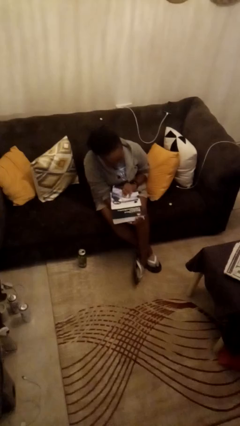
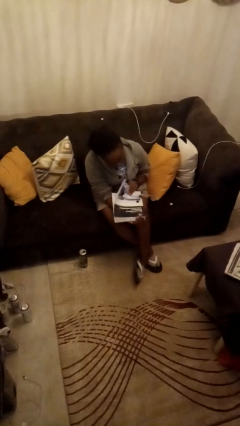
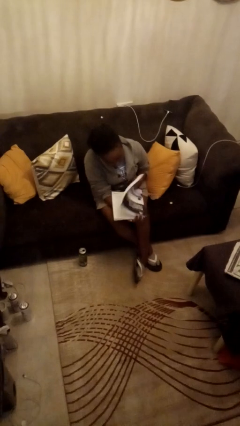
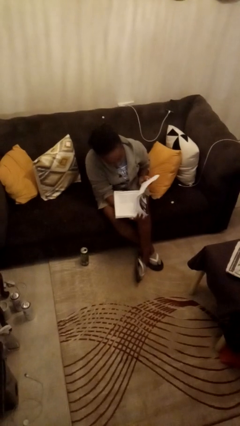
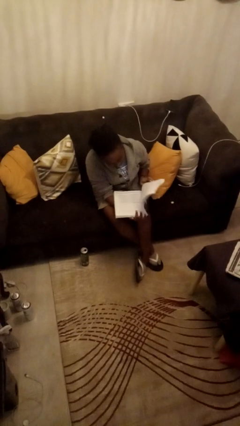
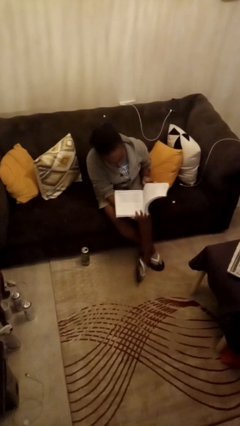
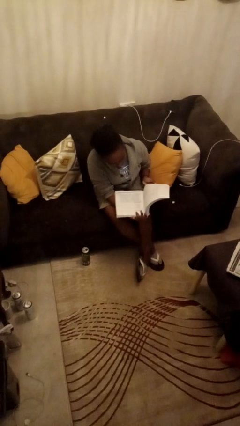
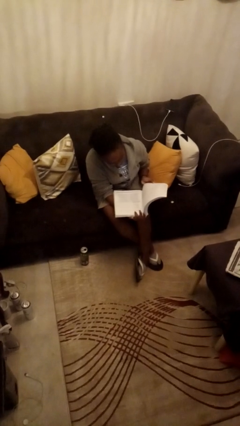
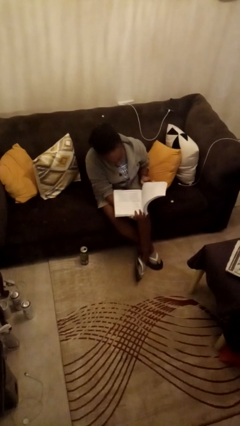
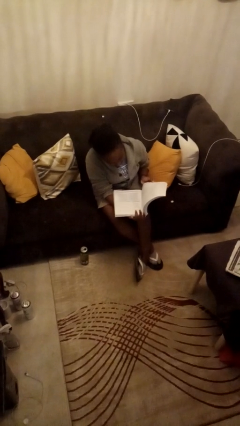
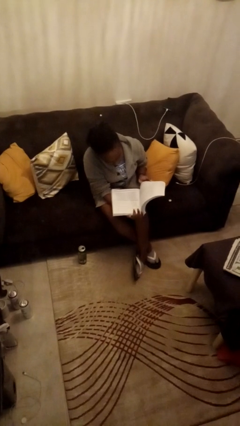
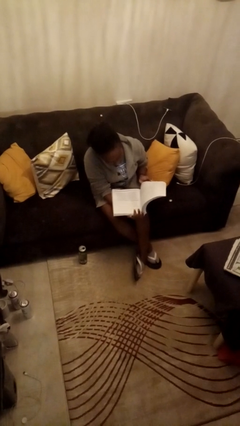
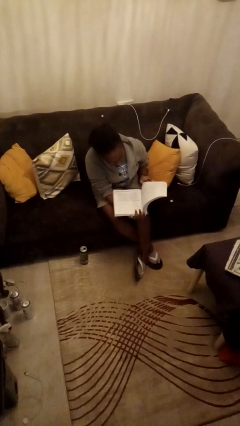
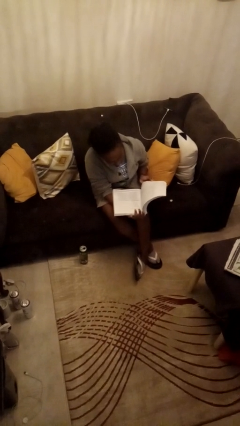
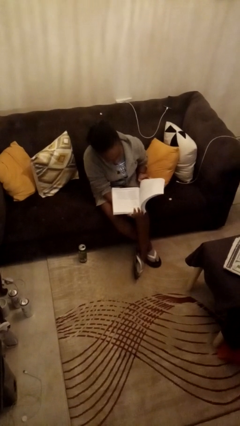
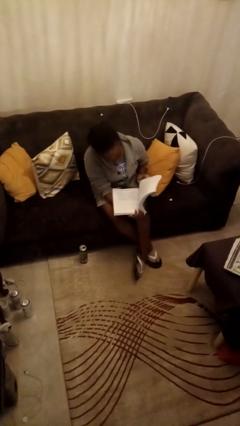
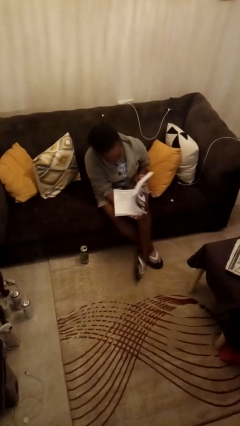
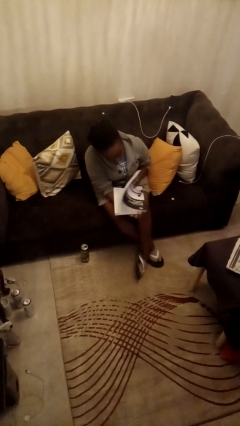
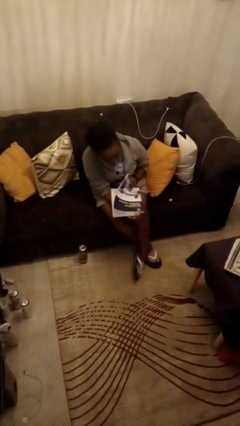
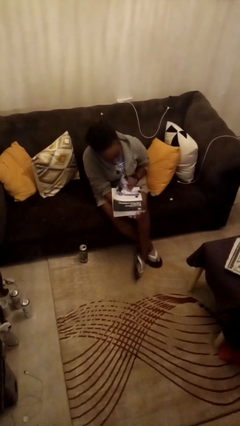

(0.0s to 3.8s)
person reads book

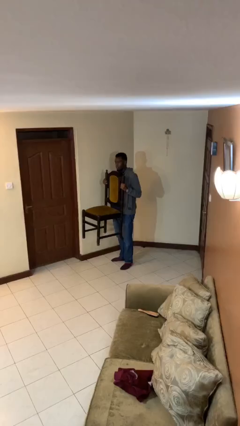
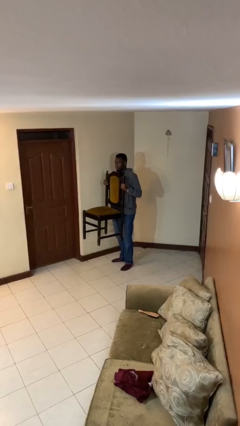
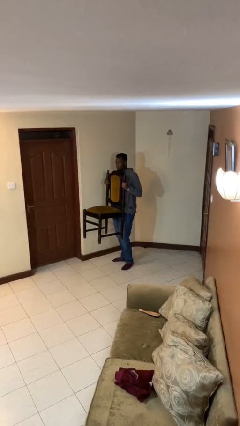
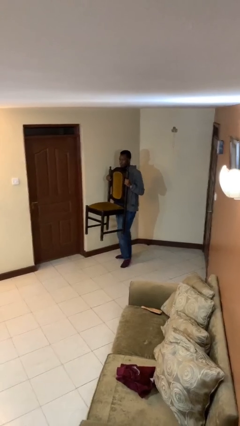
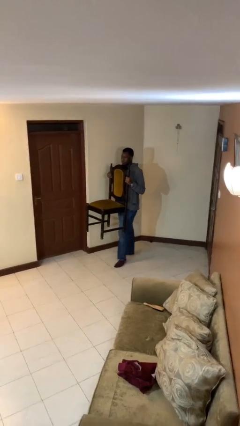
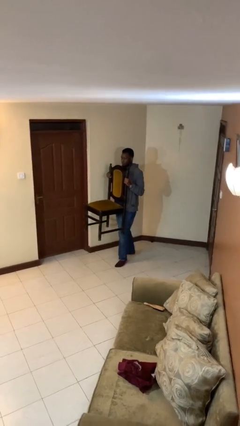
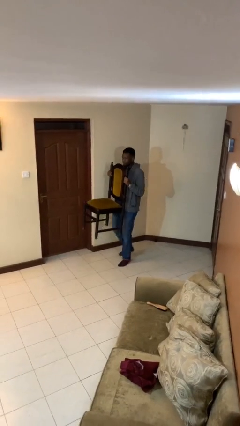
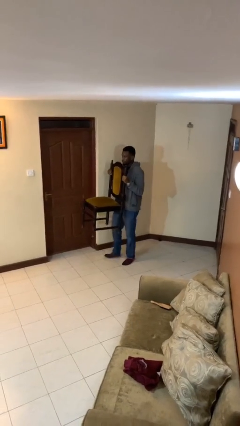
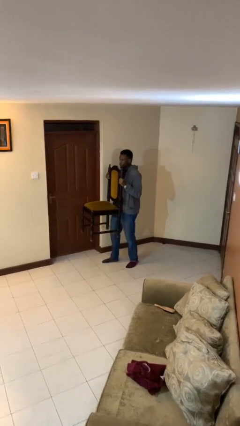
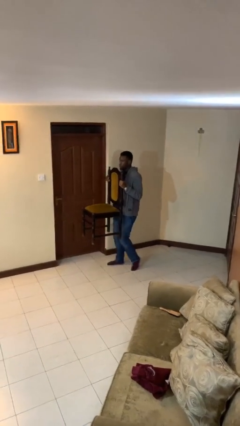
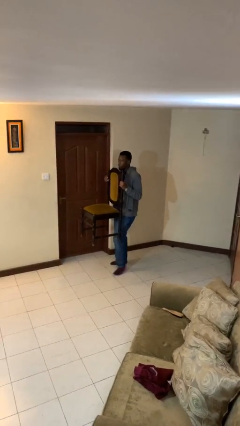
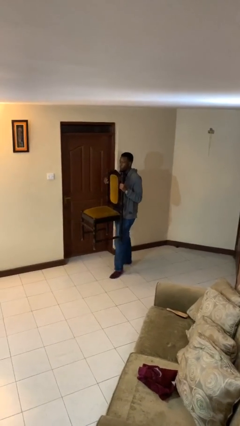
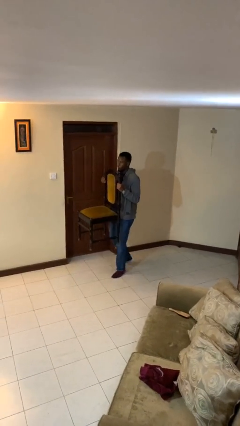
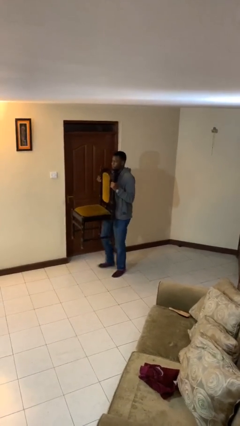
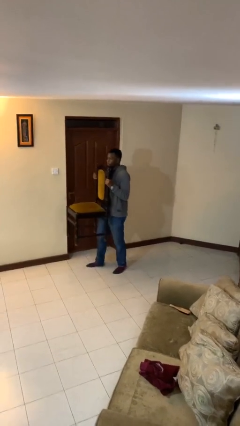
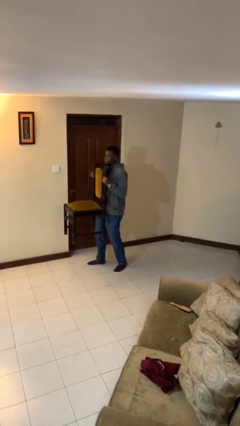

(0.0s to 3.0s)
person carries heavy object

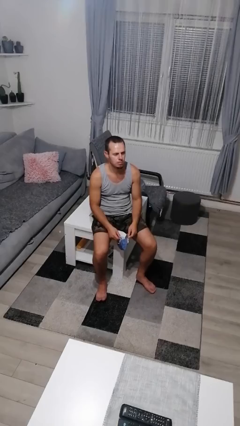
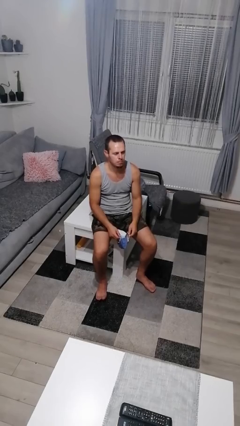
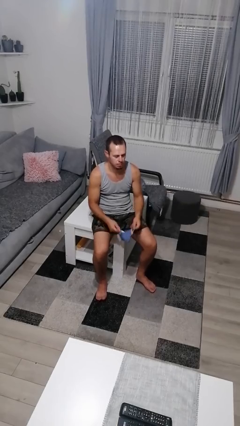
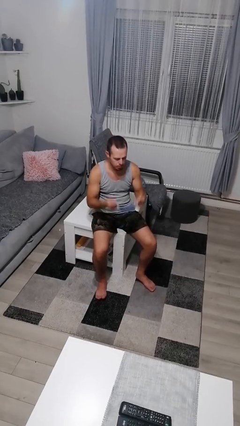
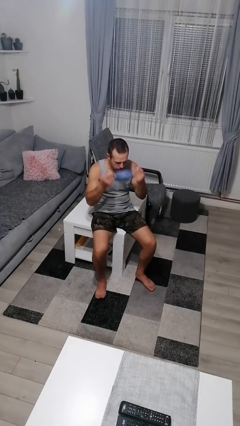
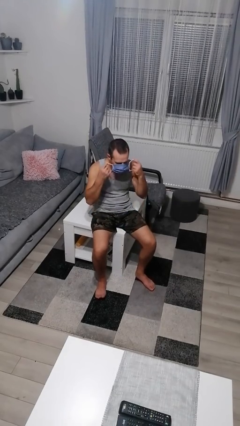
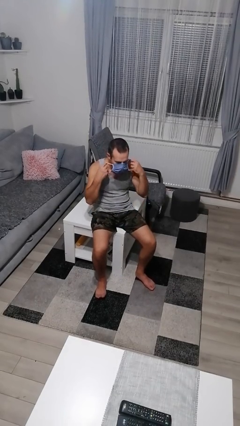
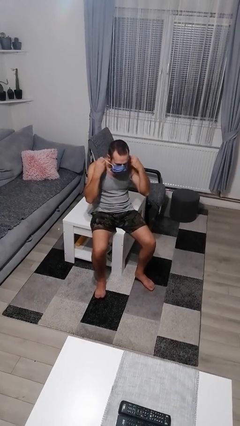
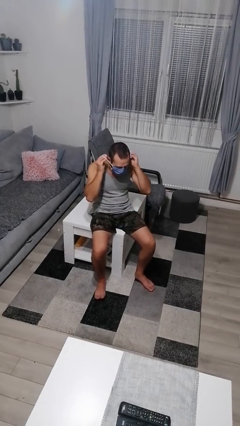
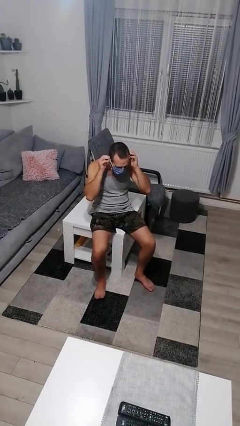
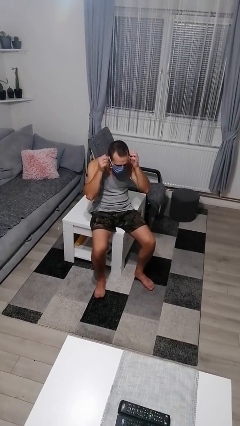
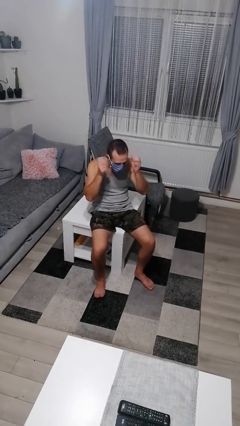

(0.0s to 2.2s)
person puts on facemask

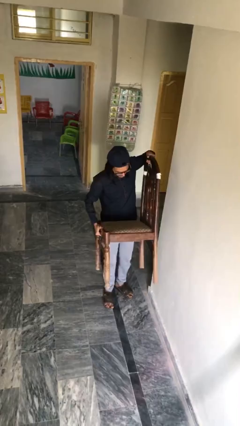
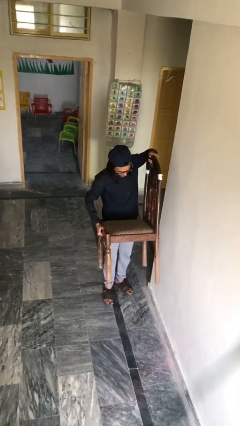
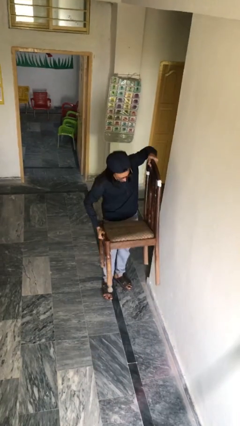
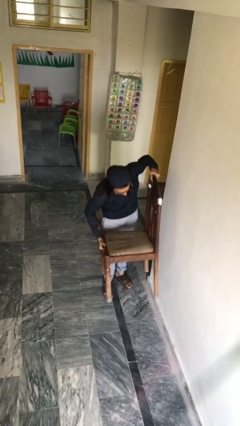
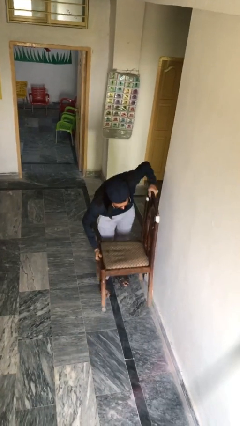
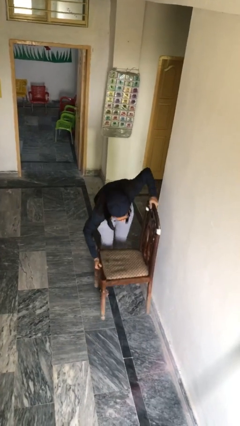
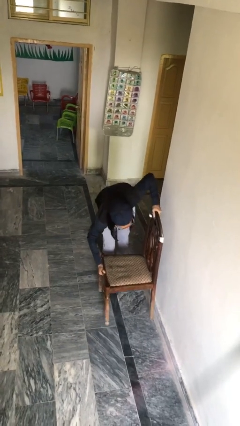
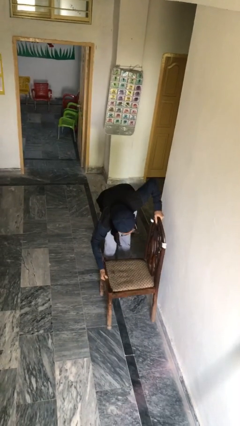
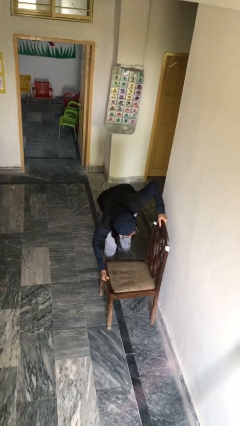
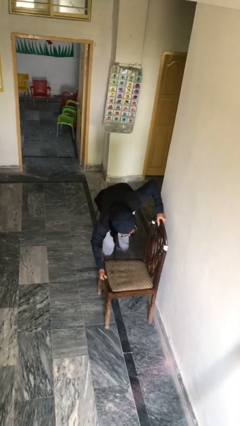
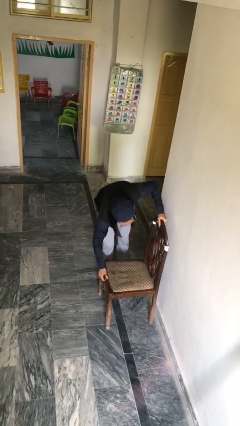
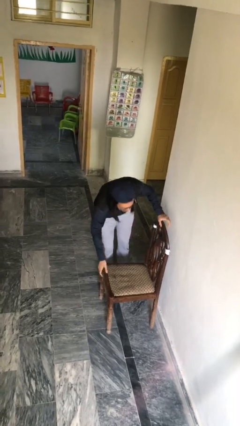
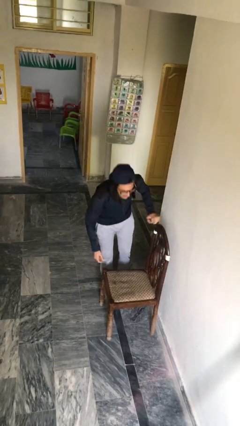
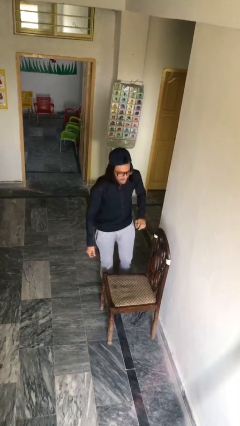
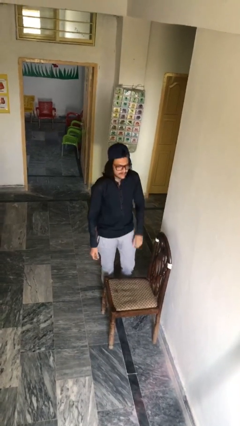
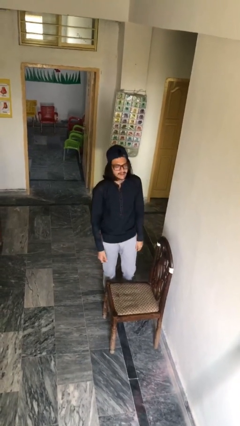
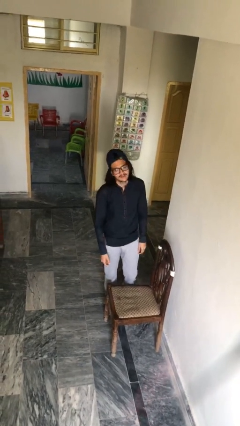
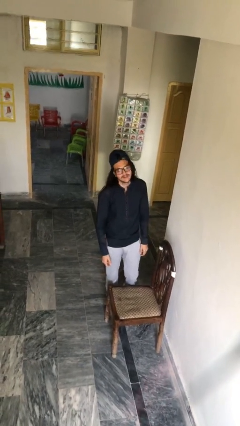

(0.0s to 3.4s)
person puts down object on floor

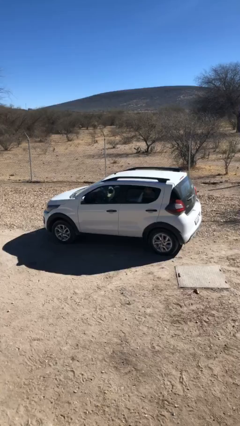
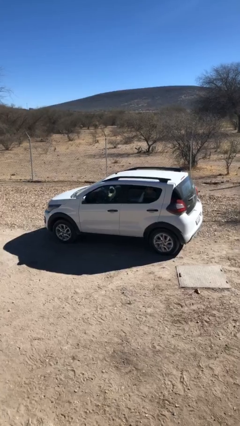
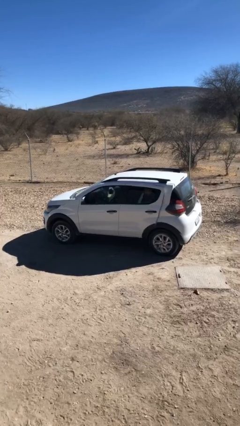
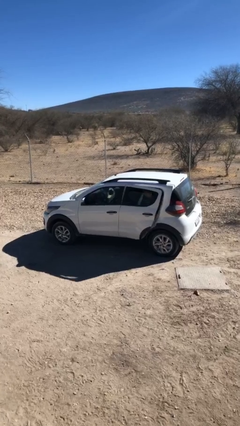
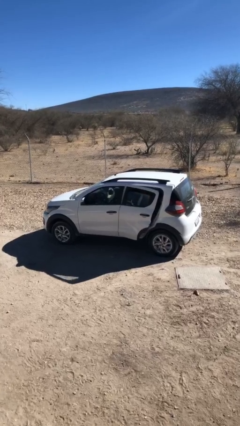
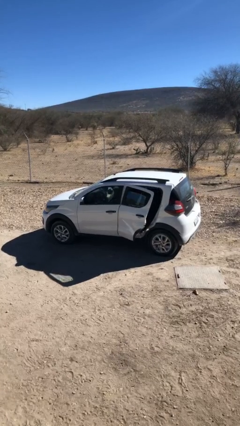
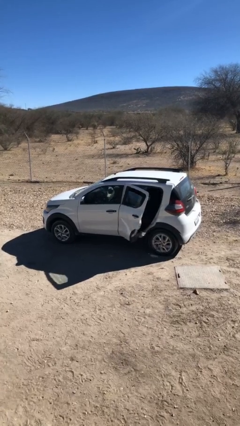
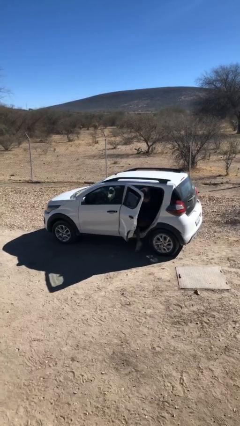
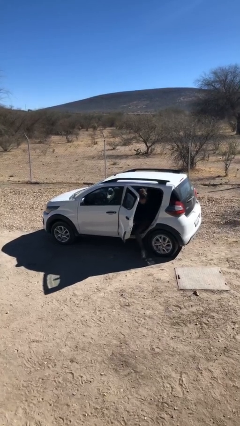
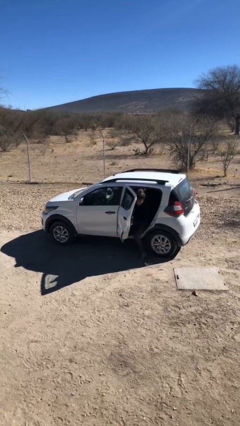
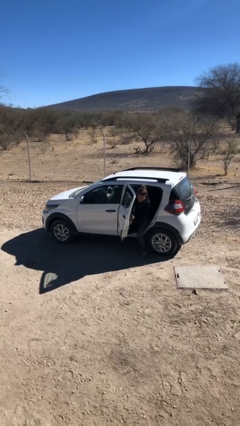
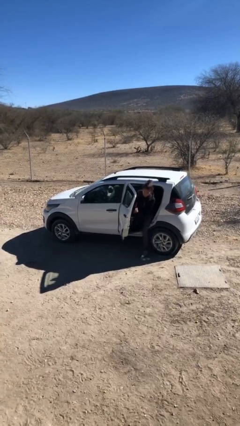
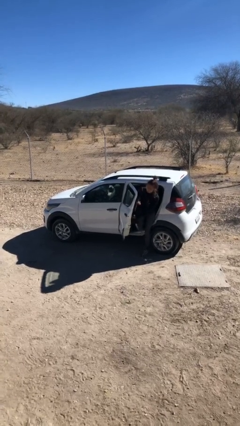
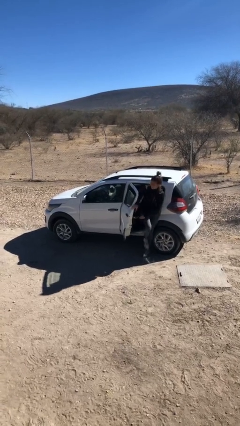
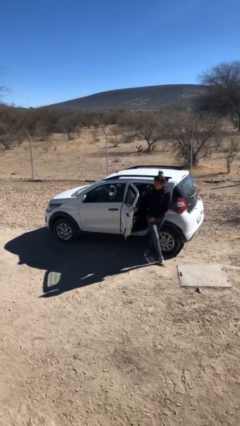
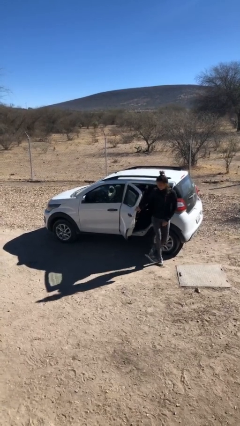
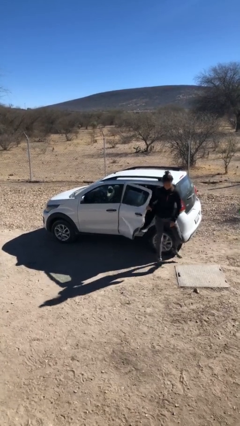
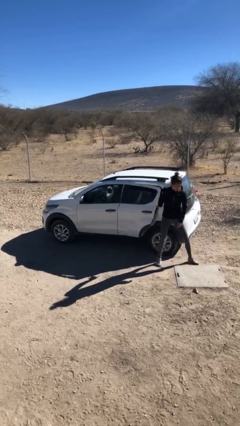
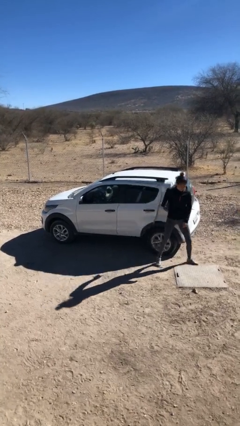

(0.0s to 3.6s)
car drops off person

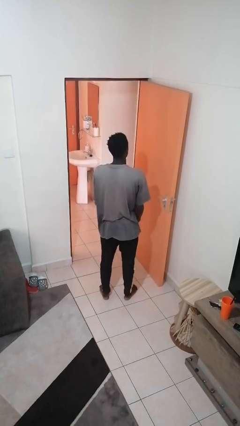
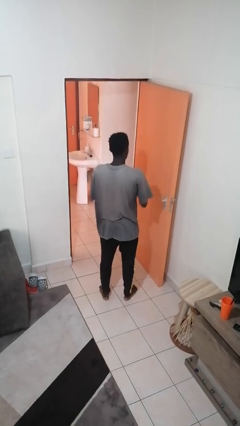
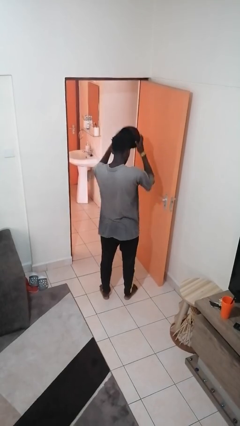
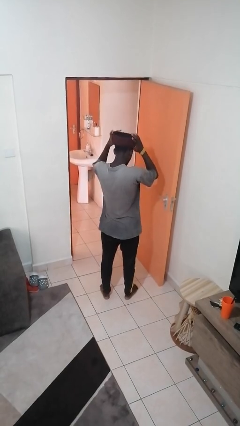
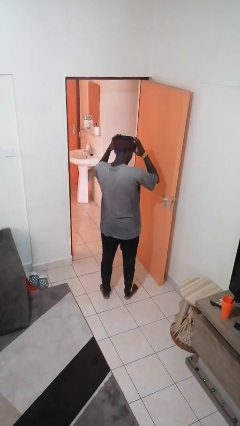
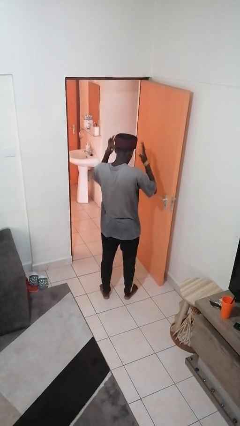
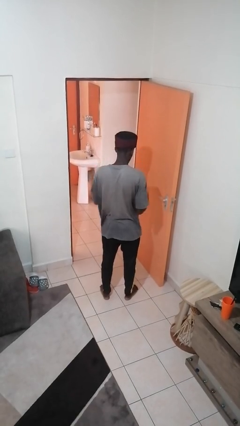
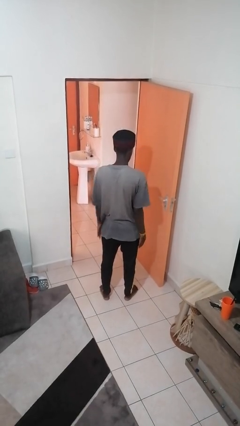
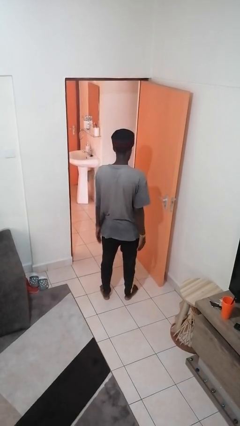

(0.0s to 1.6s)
person puts on hat
